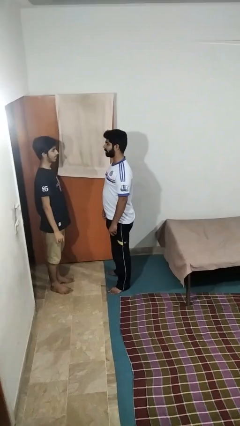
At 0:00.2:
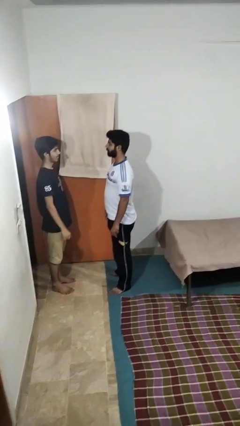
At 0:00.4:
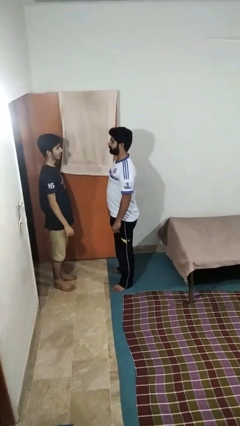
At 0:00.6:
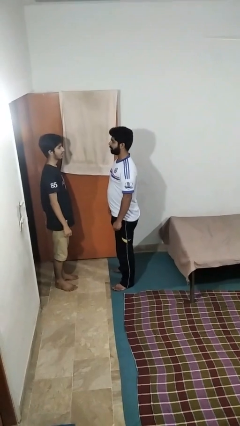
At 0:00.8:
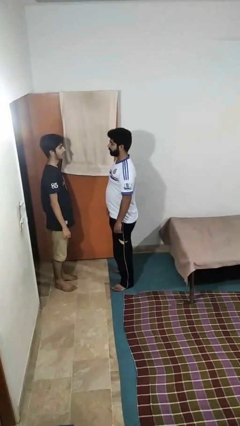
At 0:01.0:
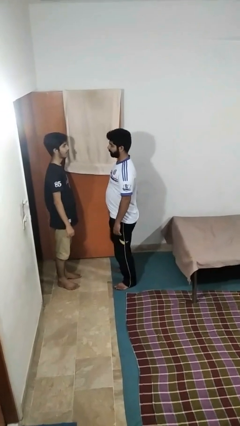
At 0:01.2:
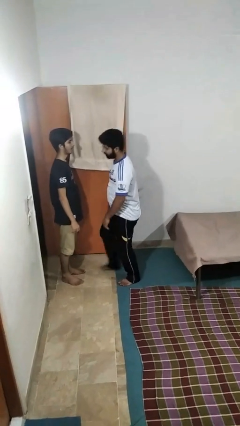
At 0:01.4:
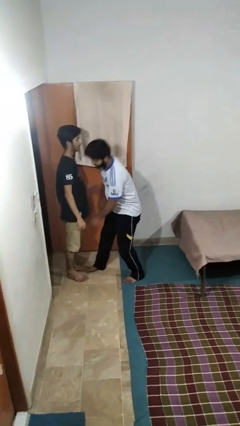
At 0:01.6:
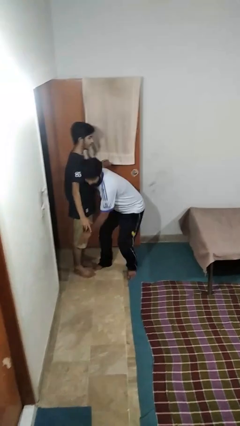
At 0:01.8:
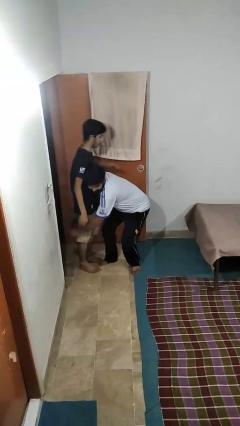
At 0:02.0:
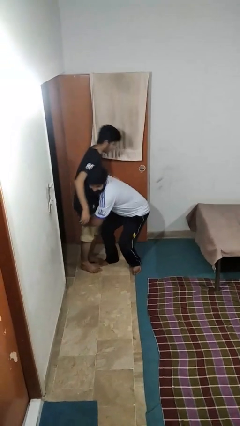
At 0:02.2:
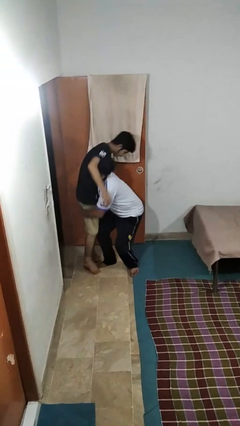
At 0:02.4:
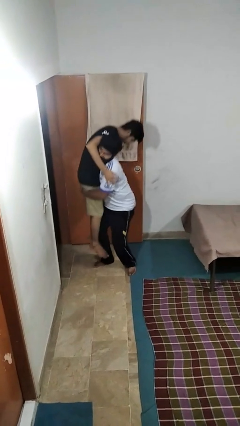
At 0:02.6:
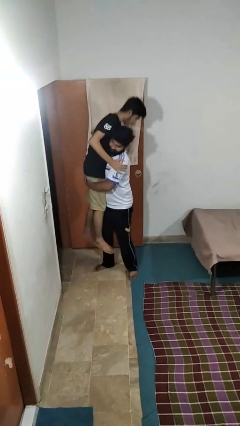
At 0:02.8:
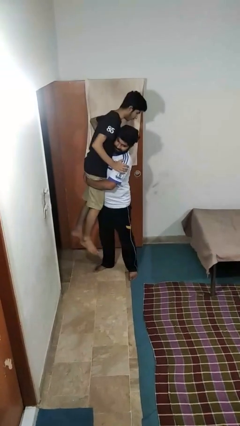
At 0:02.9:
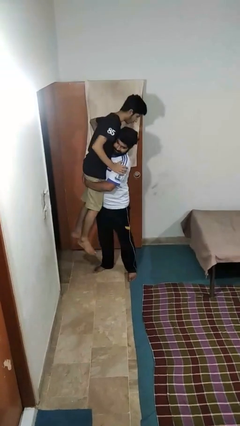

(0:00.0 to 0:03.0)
person picks up person

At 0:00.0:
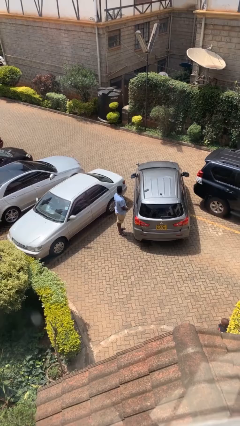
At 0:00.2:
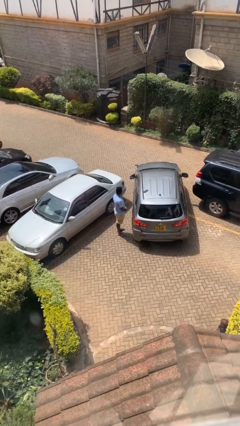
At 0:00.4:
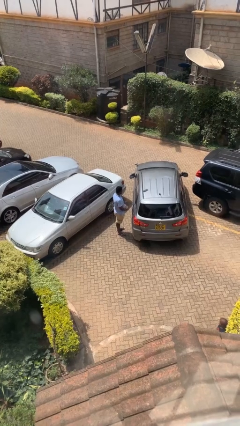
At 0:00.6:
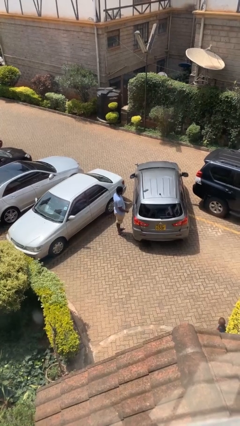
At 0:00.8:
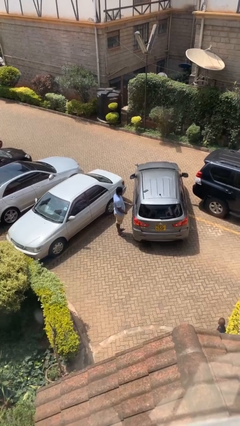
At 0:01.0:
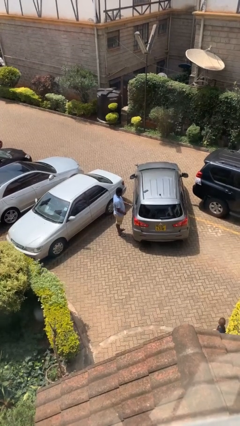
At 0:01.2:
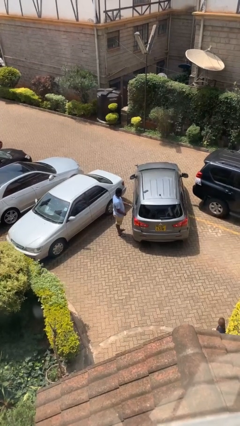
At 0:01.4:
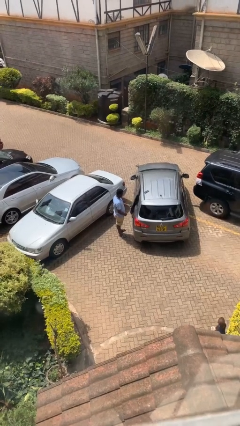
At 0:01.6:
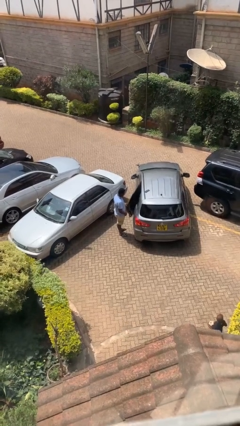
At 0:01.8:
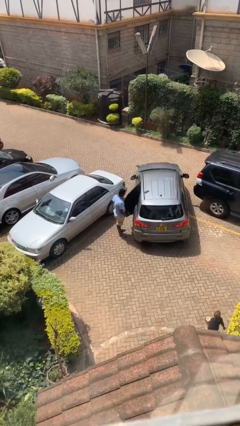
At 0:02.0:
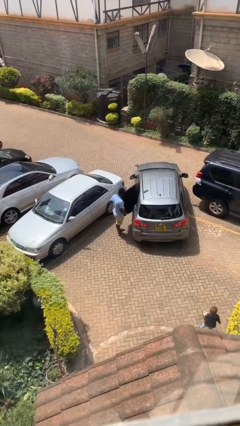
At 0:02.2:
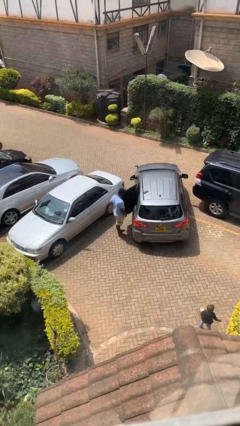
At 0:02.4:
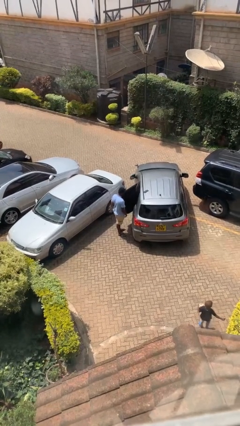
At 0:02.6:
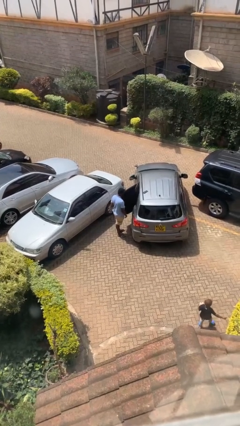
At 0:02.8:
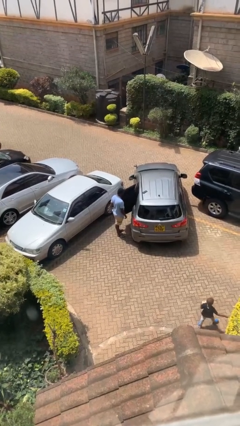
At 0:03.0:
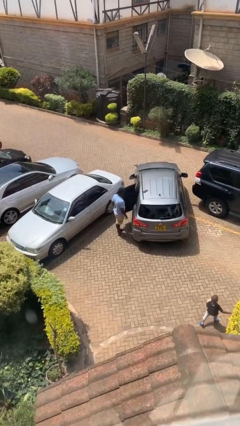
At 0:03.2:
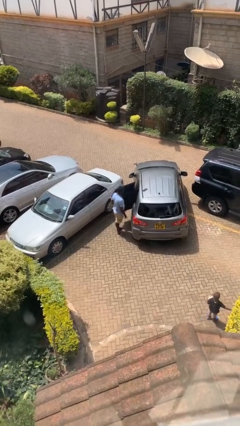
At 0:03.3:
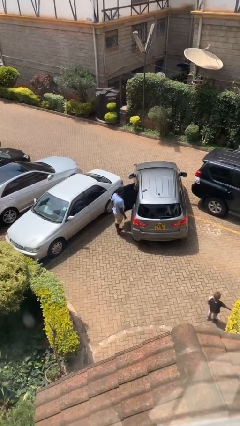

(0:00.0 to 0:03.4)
person opens car door

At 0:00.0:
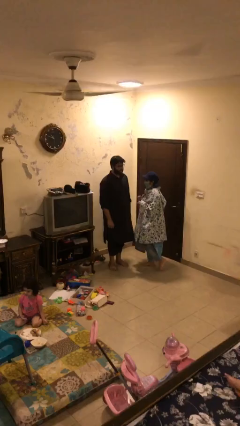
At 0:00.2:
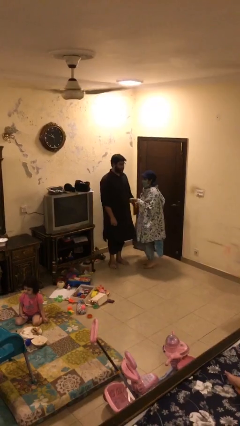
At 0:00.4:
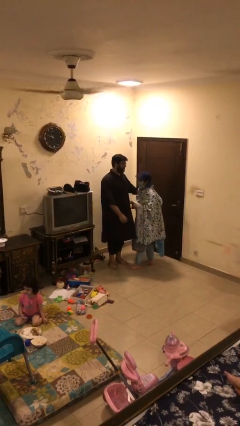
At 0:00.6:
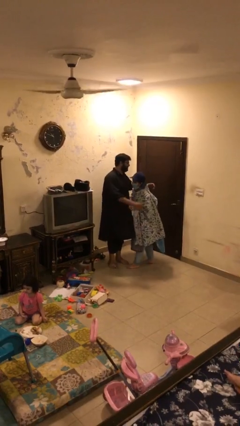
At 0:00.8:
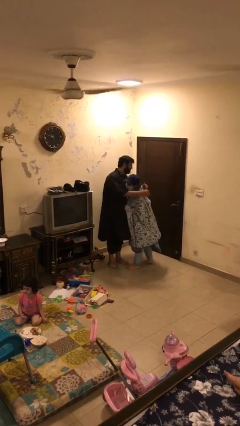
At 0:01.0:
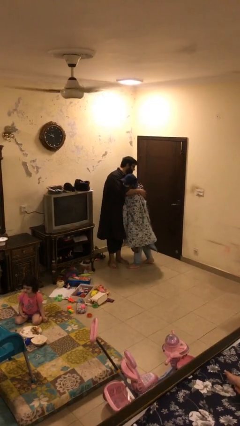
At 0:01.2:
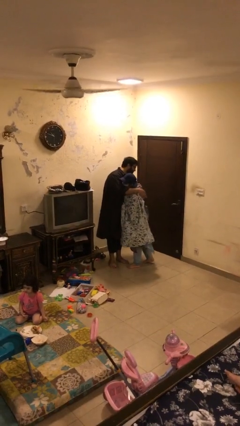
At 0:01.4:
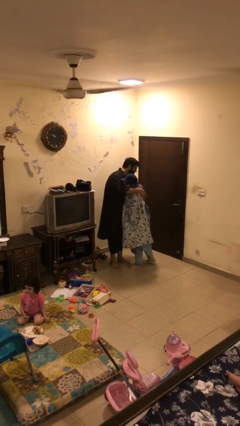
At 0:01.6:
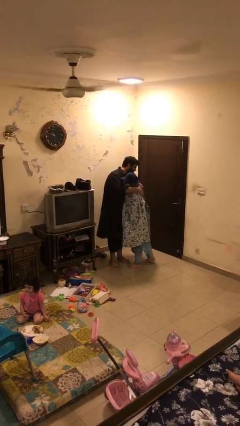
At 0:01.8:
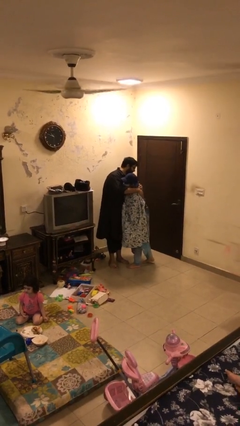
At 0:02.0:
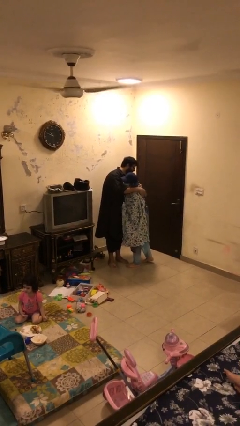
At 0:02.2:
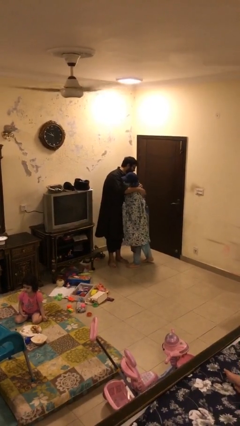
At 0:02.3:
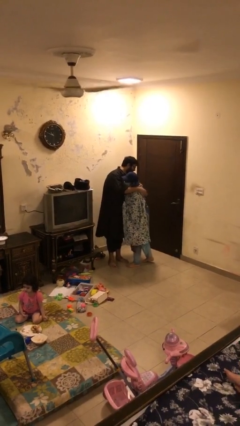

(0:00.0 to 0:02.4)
person embraces person

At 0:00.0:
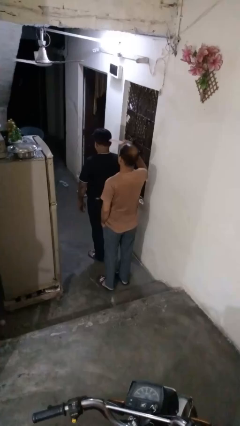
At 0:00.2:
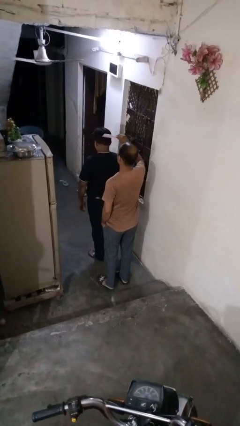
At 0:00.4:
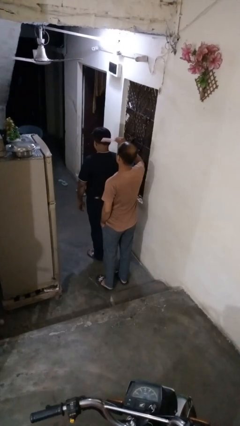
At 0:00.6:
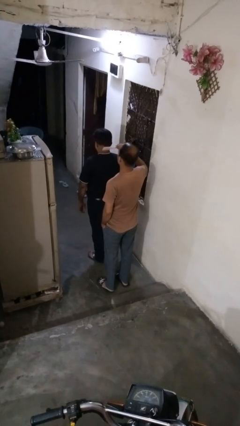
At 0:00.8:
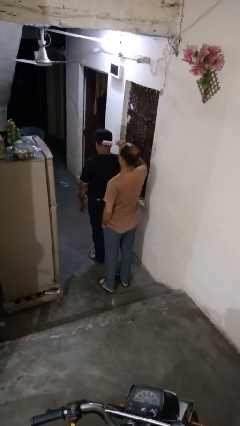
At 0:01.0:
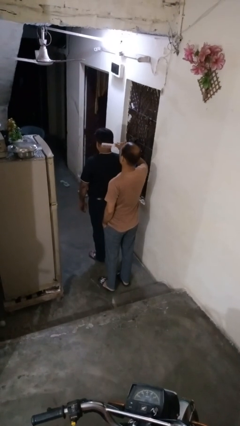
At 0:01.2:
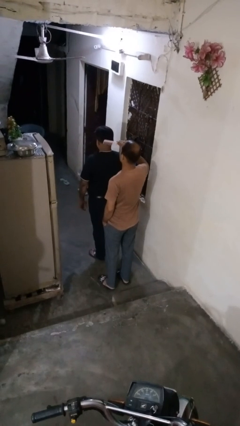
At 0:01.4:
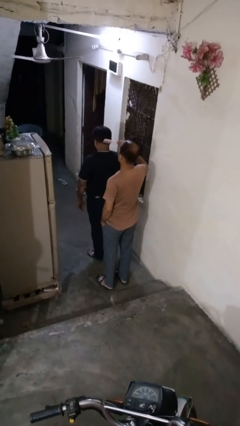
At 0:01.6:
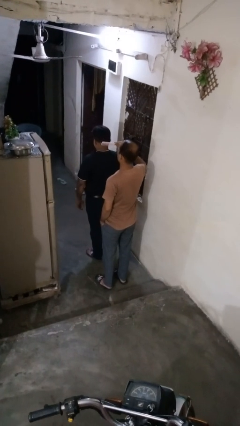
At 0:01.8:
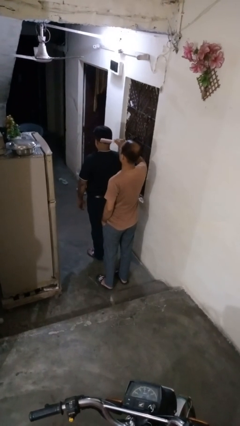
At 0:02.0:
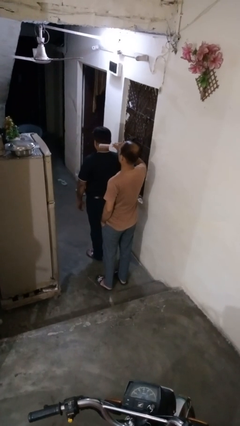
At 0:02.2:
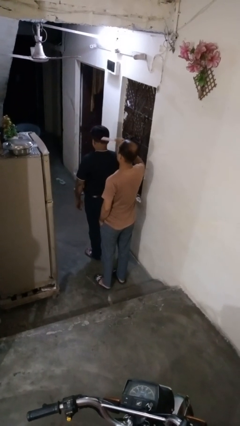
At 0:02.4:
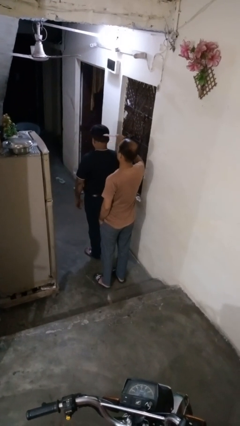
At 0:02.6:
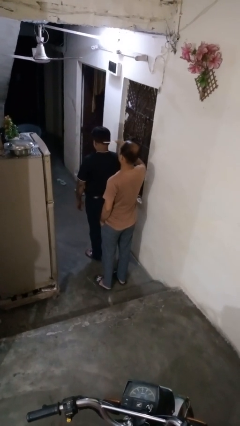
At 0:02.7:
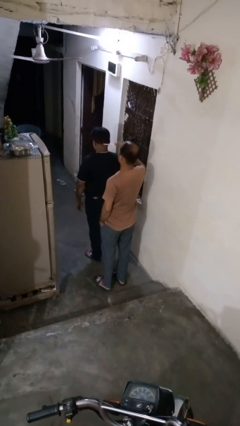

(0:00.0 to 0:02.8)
person brushes hair of person

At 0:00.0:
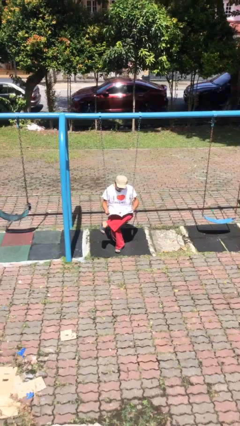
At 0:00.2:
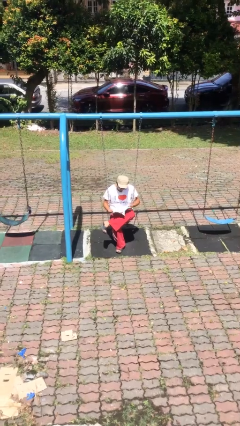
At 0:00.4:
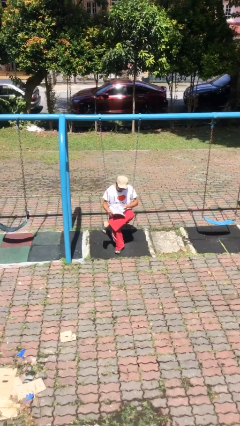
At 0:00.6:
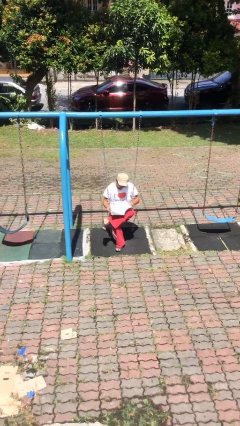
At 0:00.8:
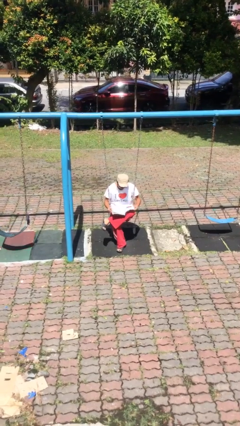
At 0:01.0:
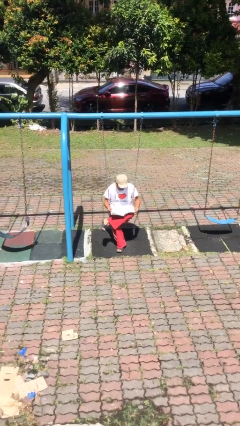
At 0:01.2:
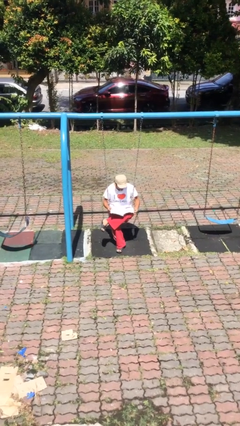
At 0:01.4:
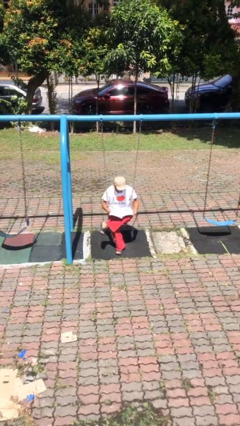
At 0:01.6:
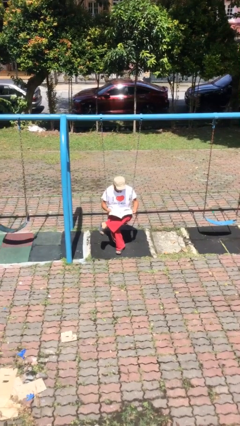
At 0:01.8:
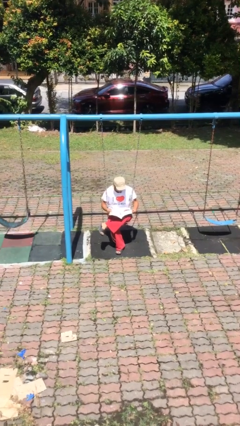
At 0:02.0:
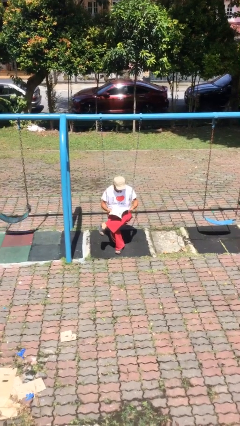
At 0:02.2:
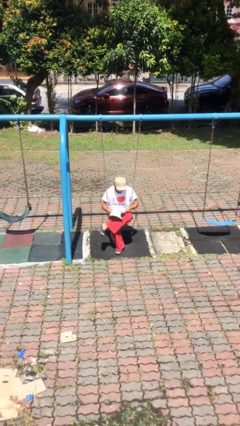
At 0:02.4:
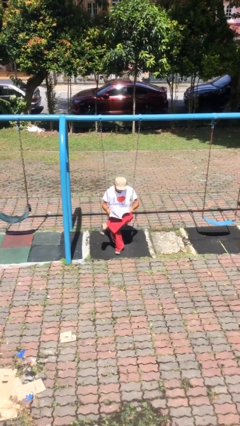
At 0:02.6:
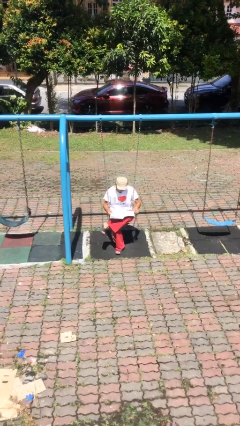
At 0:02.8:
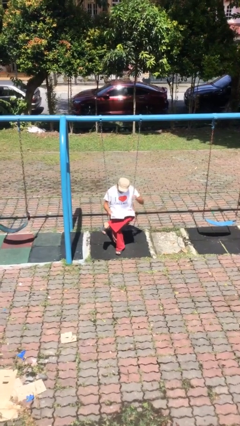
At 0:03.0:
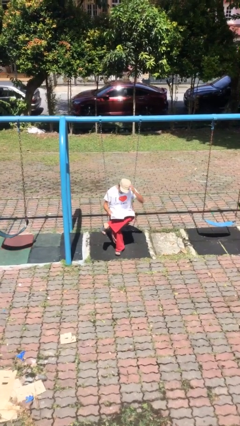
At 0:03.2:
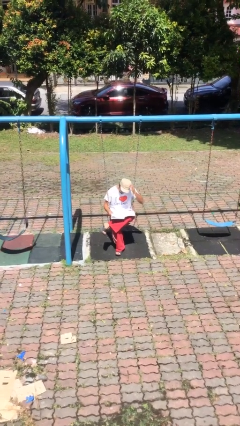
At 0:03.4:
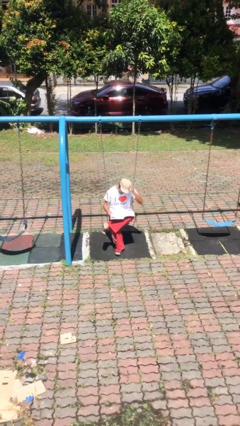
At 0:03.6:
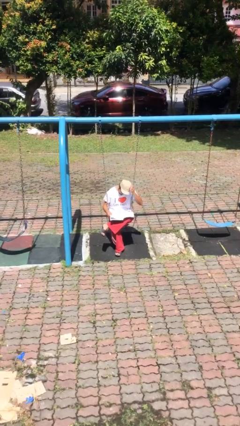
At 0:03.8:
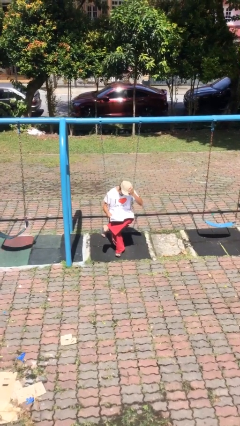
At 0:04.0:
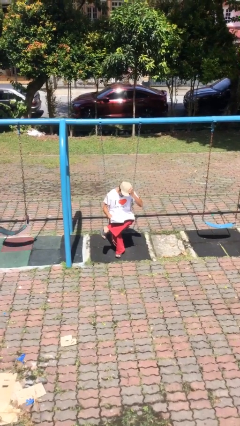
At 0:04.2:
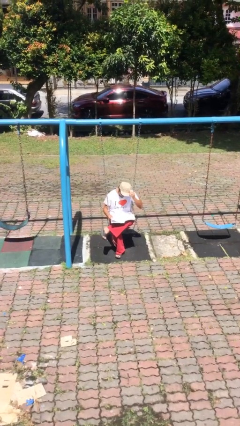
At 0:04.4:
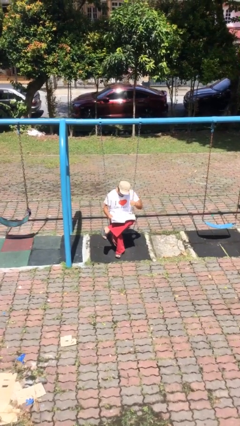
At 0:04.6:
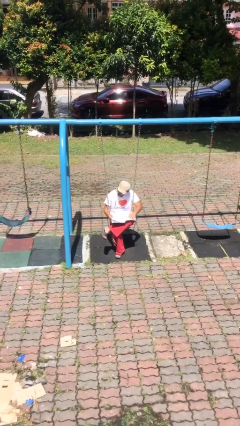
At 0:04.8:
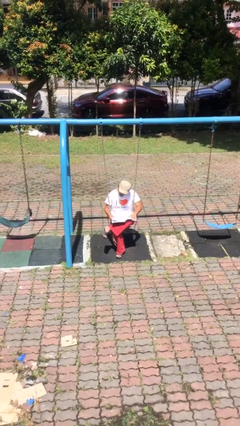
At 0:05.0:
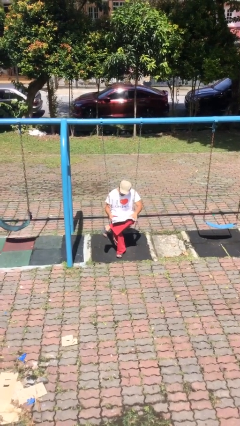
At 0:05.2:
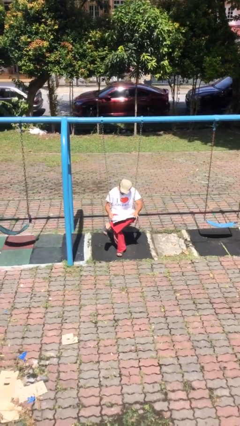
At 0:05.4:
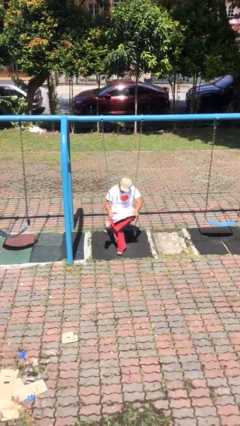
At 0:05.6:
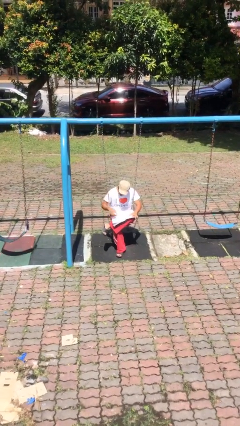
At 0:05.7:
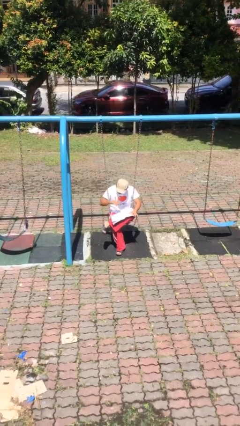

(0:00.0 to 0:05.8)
person reads document
